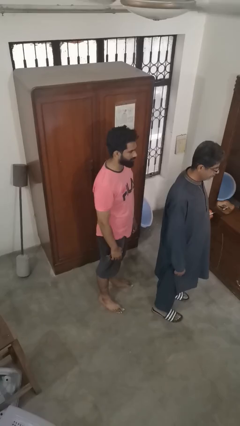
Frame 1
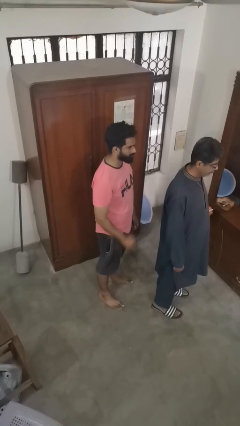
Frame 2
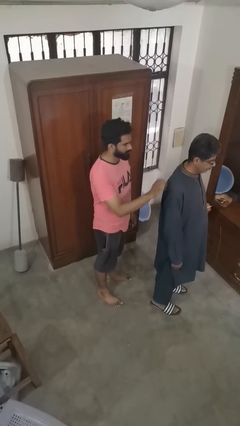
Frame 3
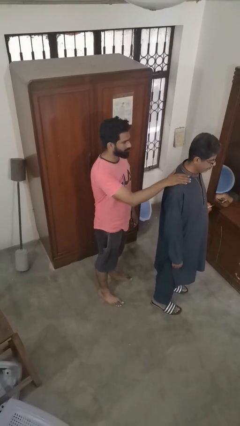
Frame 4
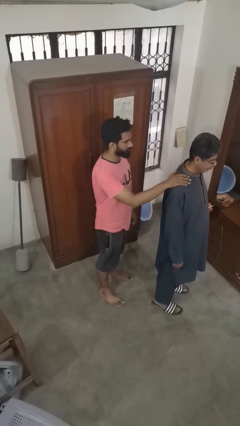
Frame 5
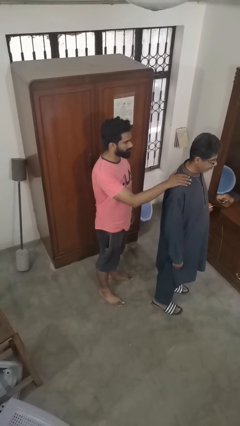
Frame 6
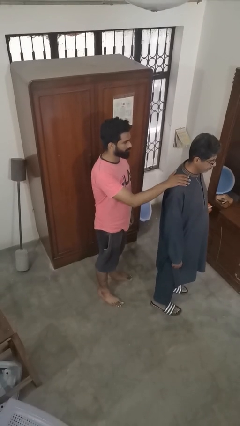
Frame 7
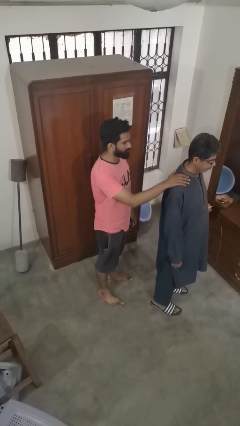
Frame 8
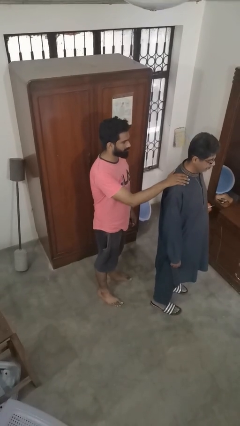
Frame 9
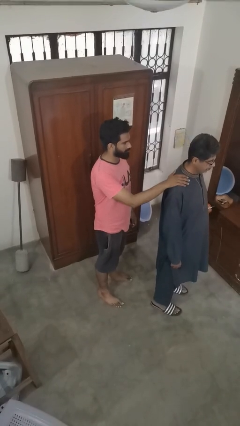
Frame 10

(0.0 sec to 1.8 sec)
person grabs person by shoulder

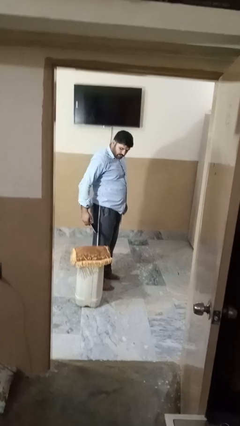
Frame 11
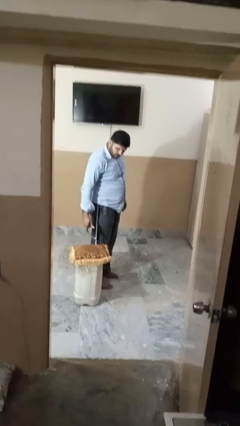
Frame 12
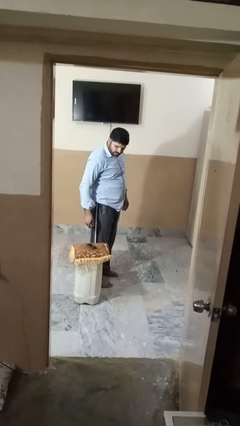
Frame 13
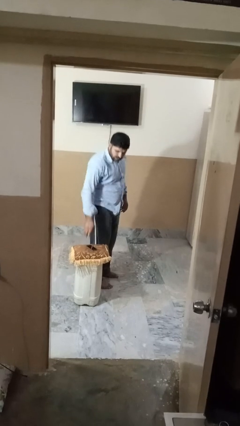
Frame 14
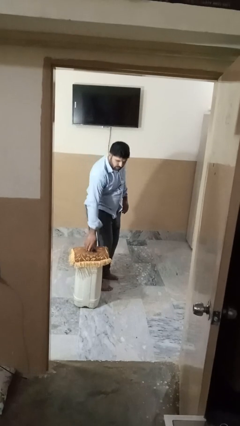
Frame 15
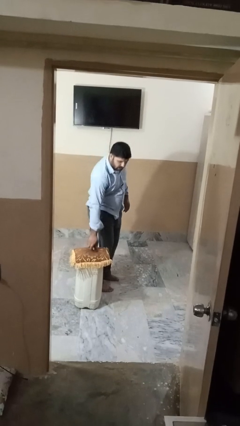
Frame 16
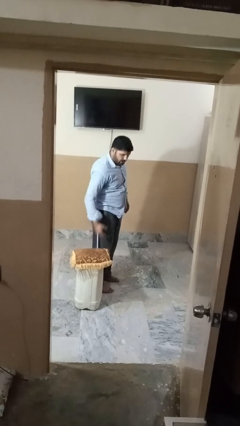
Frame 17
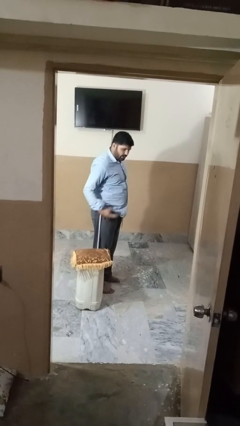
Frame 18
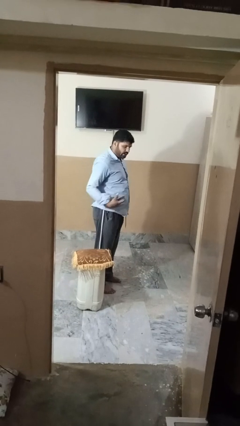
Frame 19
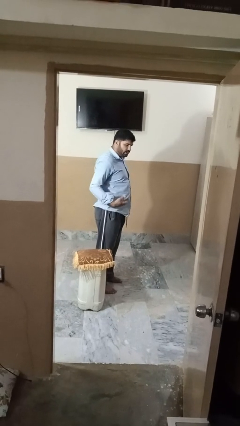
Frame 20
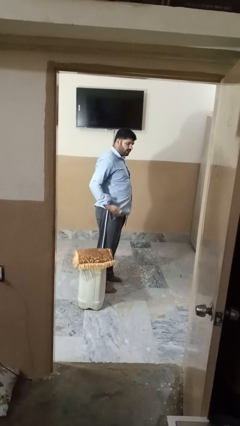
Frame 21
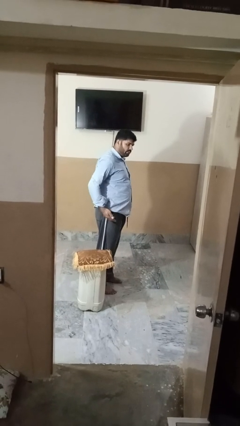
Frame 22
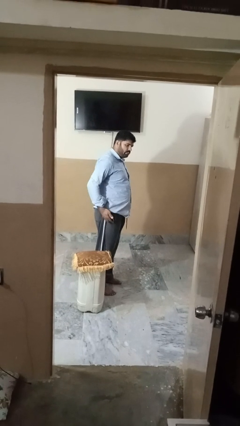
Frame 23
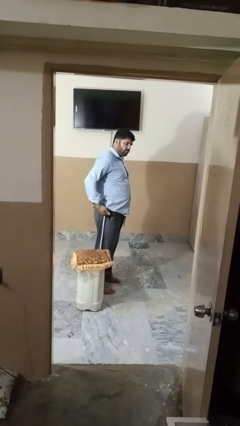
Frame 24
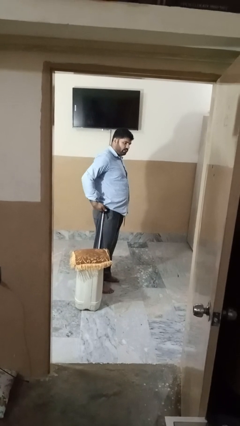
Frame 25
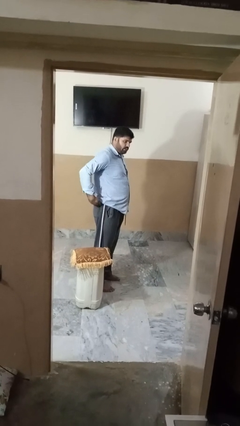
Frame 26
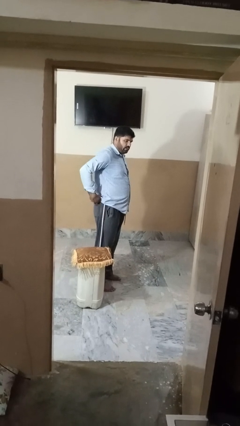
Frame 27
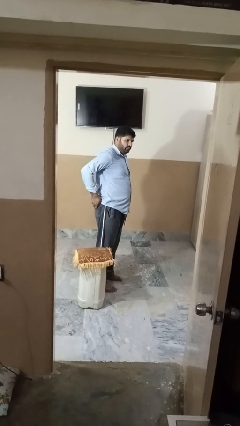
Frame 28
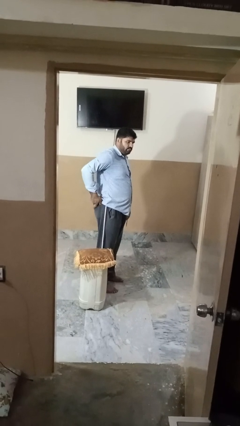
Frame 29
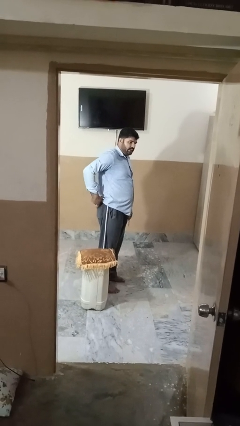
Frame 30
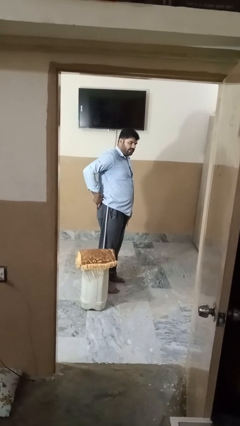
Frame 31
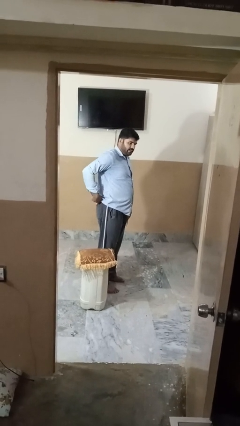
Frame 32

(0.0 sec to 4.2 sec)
person takes phone from pocket

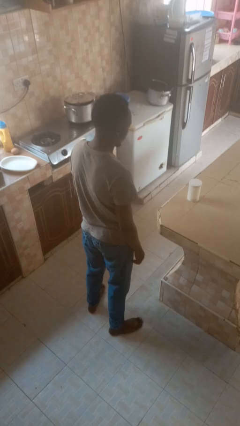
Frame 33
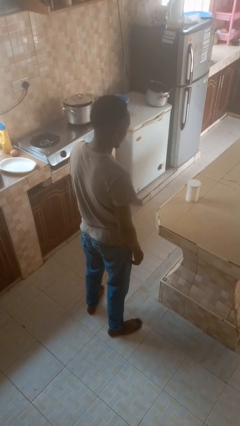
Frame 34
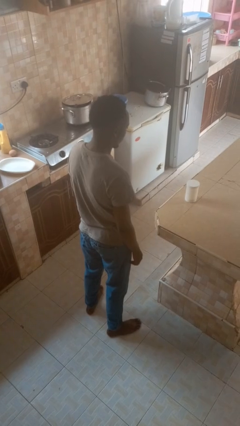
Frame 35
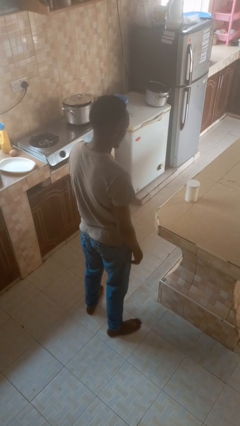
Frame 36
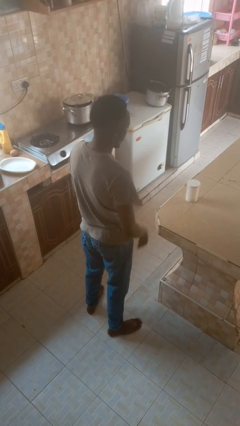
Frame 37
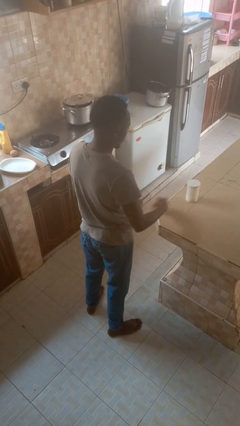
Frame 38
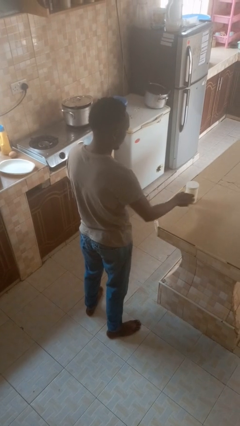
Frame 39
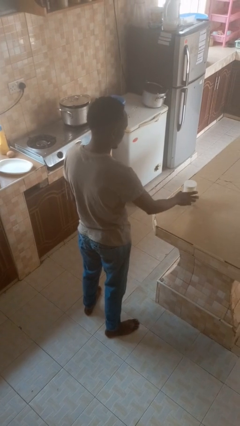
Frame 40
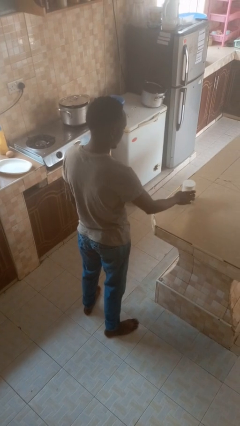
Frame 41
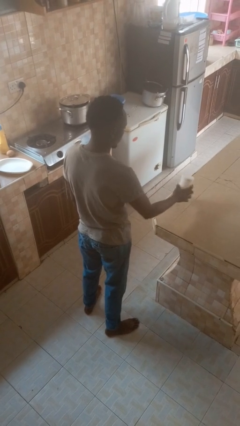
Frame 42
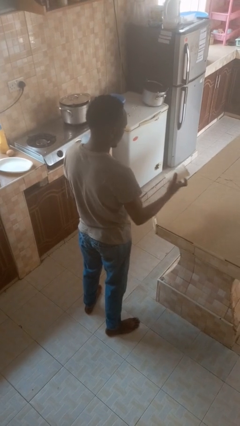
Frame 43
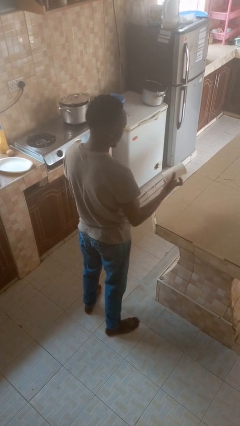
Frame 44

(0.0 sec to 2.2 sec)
person picks up object from countertop

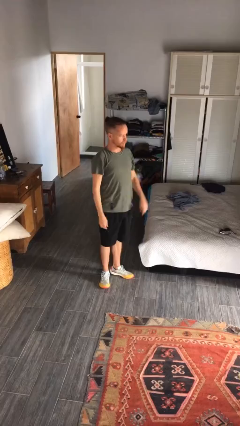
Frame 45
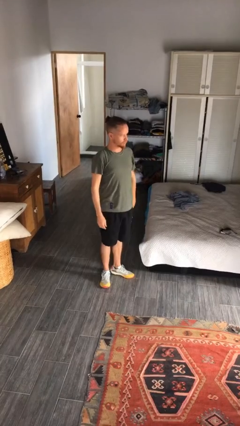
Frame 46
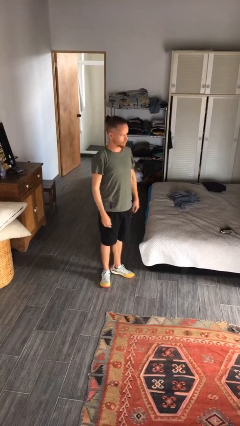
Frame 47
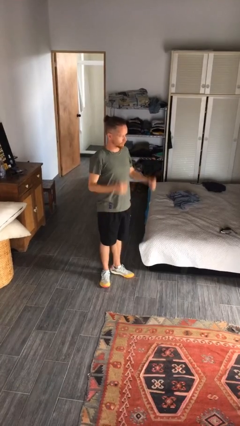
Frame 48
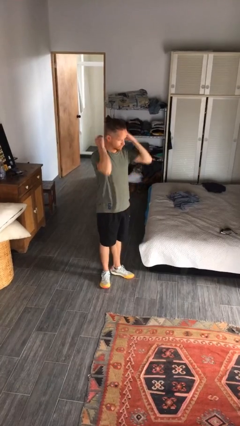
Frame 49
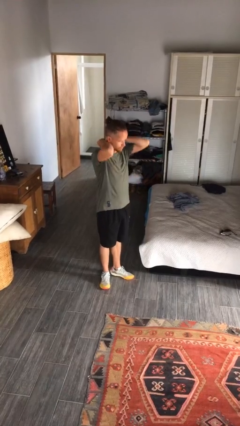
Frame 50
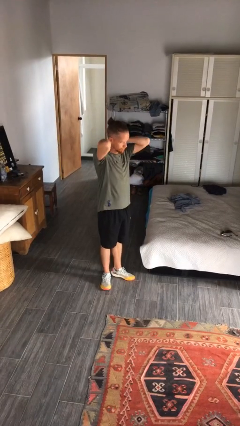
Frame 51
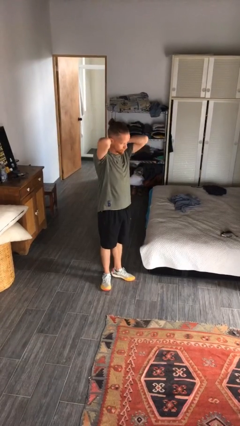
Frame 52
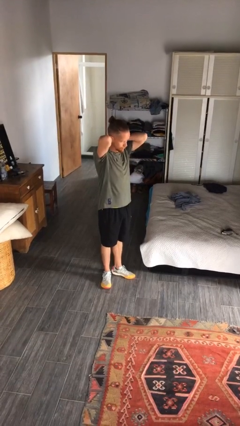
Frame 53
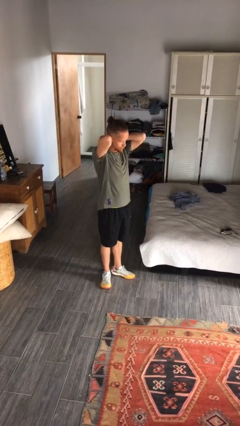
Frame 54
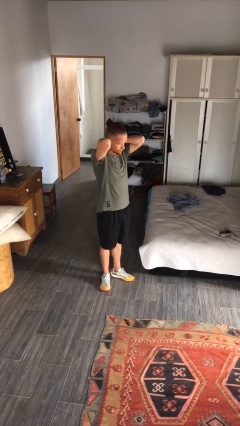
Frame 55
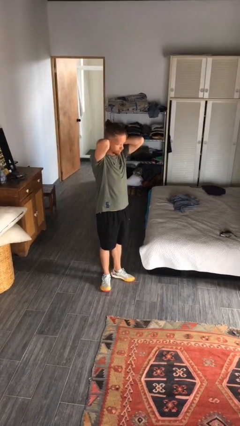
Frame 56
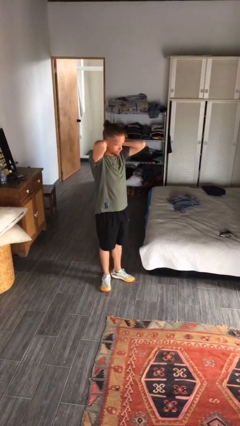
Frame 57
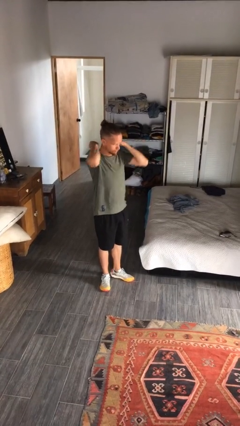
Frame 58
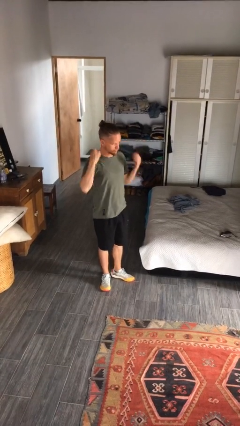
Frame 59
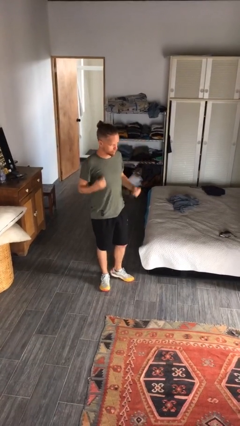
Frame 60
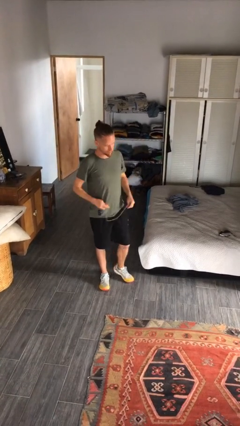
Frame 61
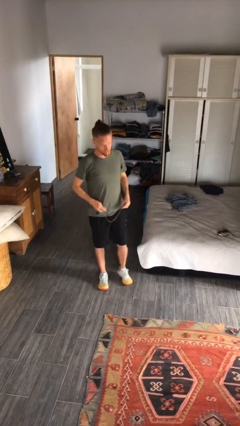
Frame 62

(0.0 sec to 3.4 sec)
person takes off necklace

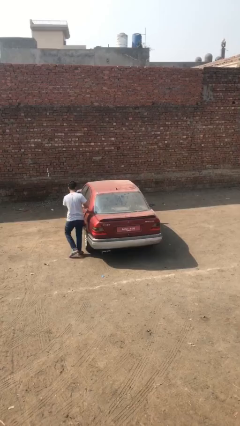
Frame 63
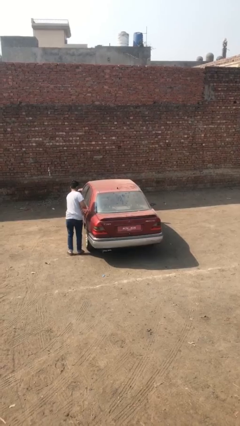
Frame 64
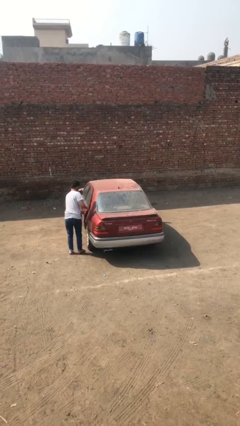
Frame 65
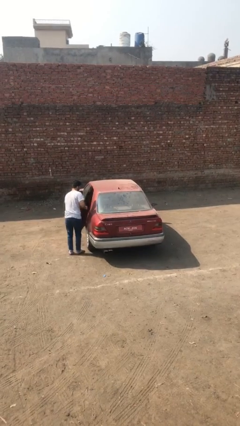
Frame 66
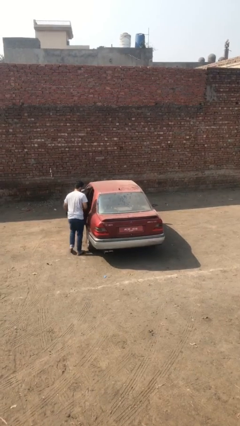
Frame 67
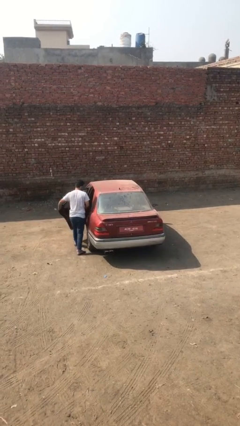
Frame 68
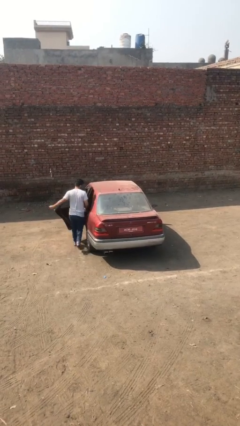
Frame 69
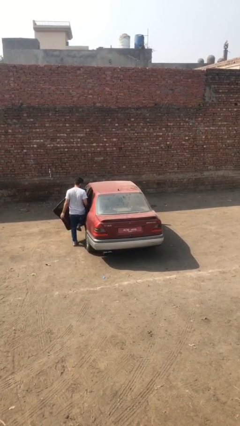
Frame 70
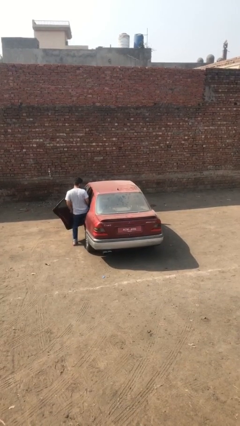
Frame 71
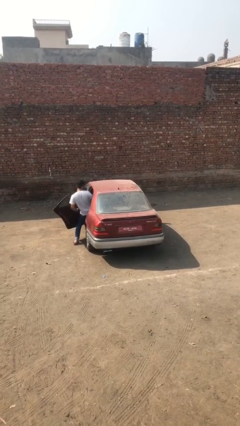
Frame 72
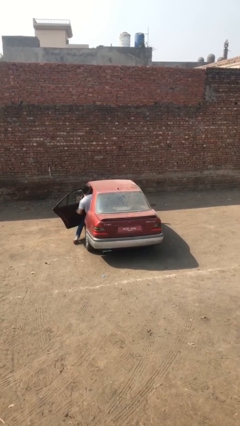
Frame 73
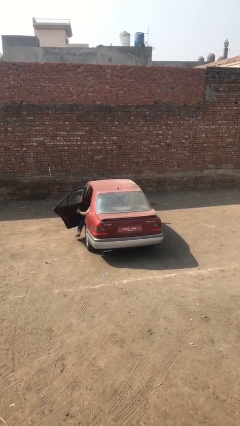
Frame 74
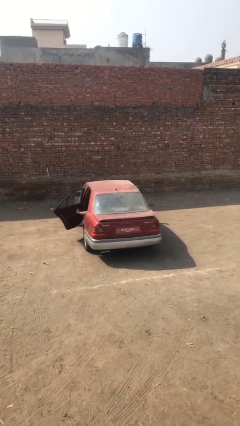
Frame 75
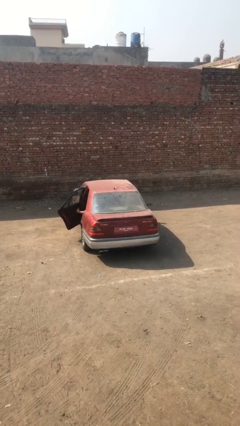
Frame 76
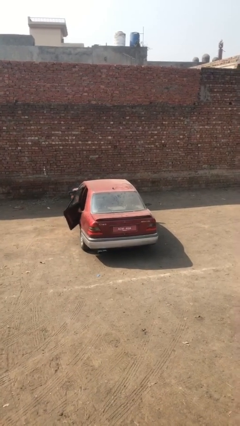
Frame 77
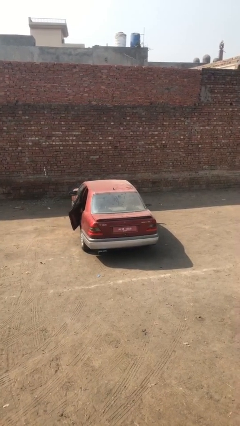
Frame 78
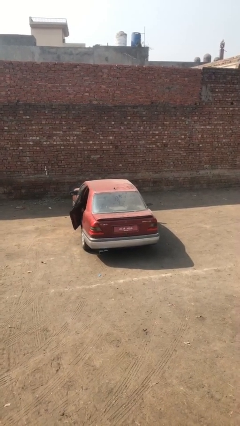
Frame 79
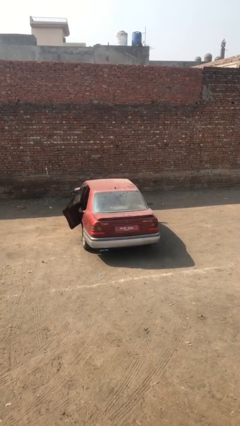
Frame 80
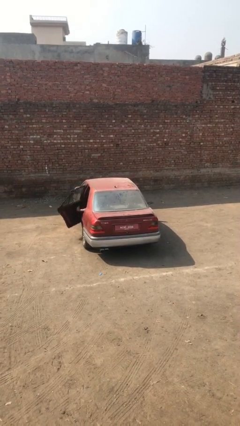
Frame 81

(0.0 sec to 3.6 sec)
car picks up person

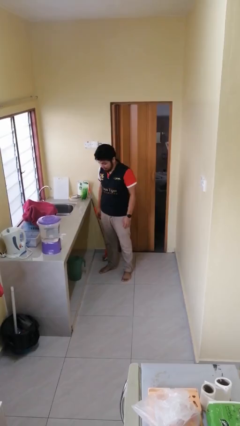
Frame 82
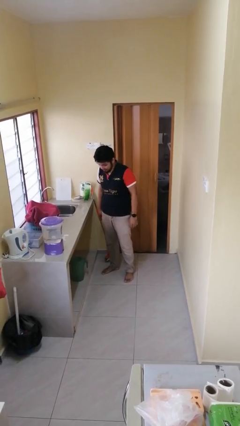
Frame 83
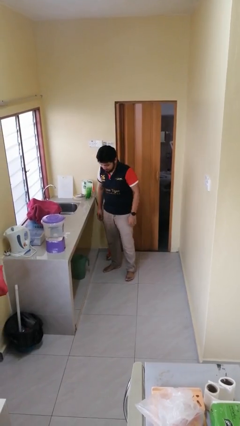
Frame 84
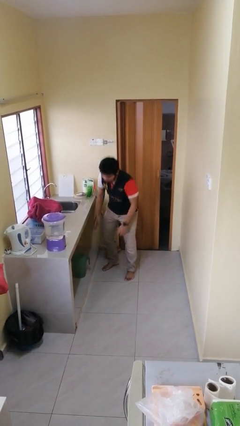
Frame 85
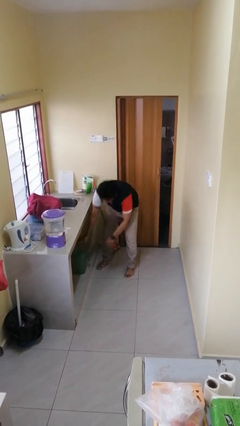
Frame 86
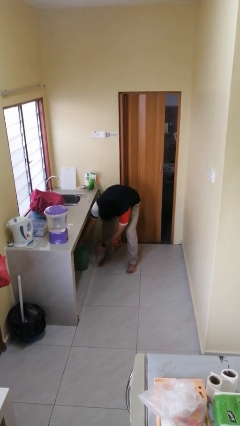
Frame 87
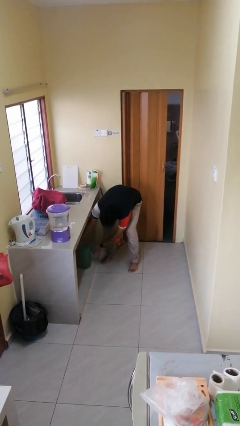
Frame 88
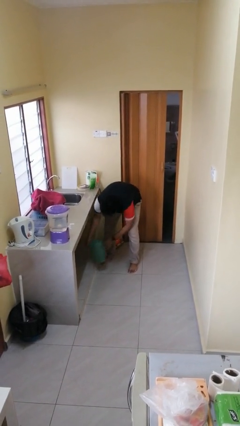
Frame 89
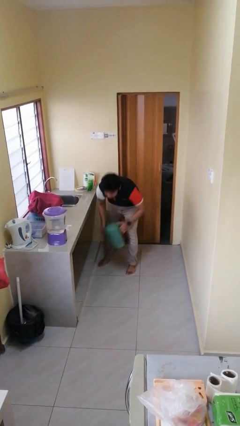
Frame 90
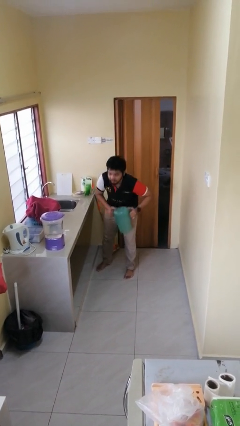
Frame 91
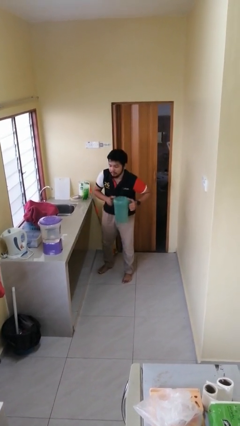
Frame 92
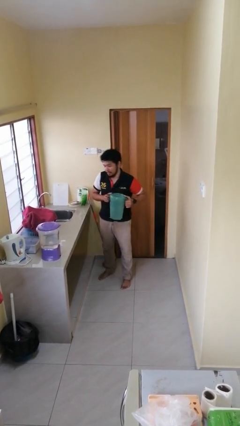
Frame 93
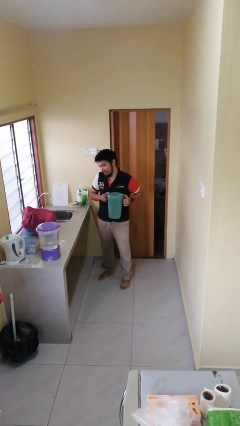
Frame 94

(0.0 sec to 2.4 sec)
person picks up object from cabinet
